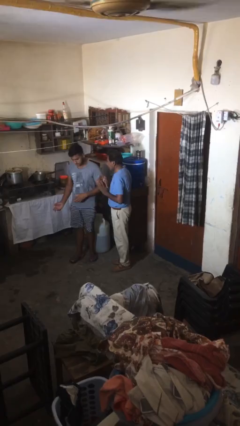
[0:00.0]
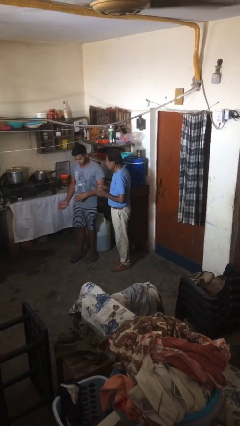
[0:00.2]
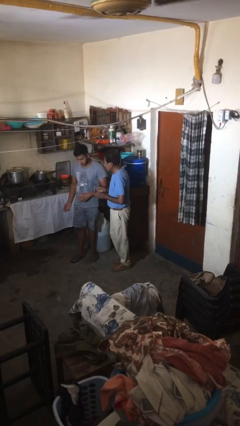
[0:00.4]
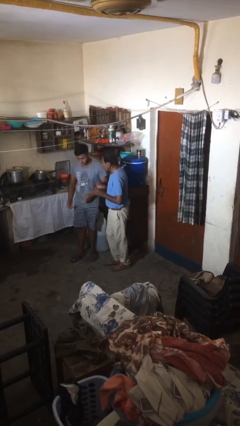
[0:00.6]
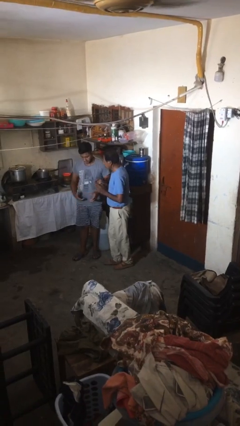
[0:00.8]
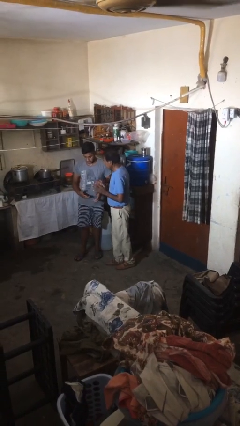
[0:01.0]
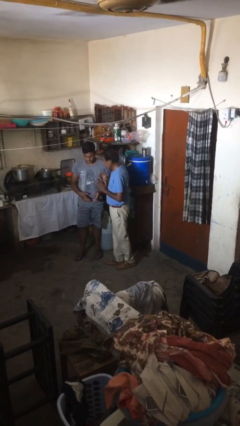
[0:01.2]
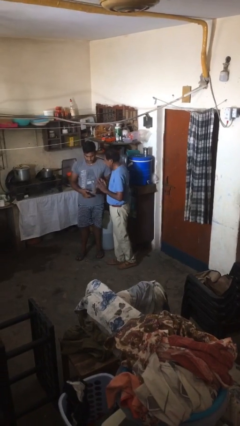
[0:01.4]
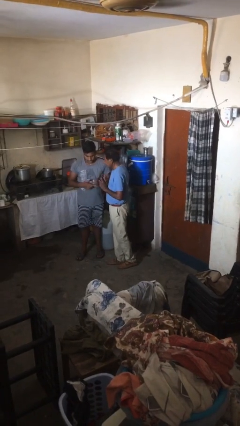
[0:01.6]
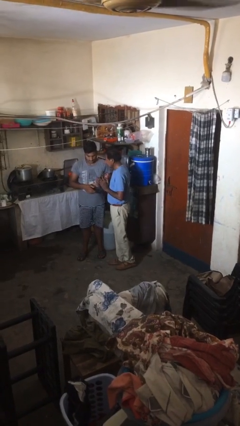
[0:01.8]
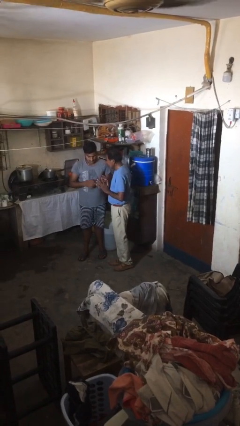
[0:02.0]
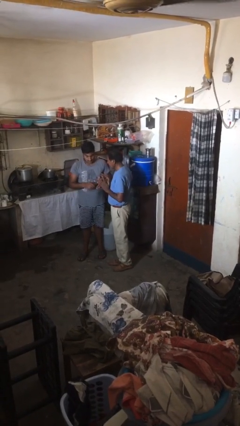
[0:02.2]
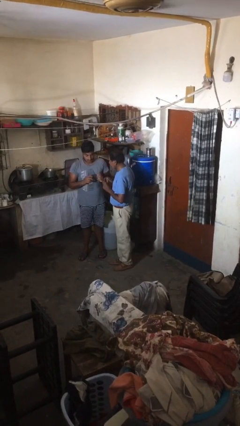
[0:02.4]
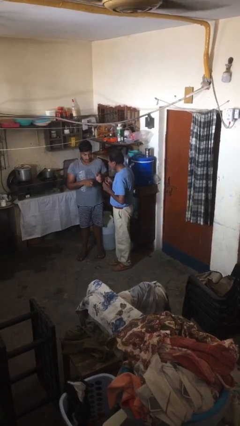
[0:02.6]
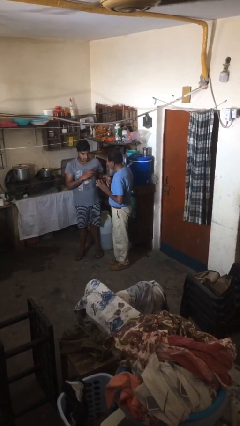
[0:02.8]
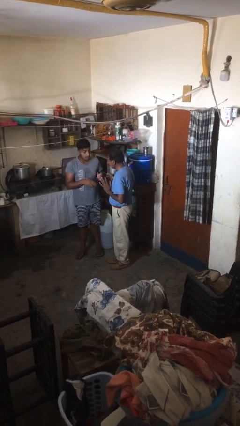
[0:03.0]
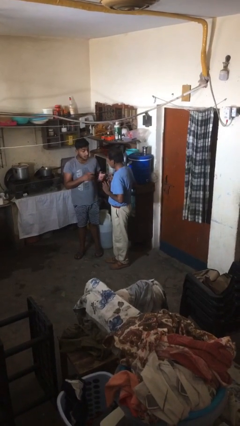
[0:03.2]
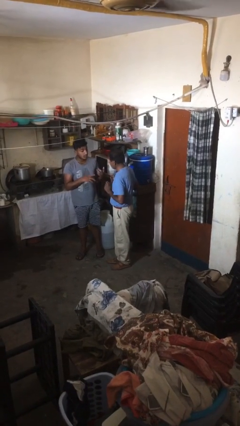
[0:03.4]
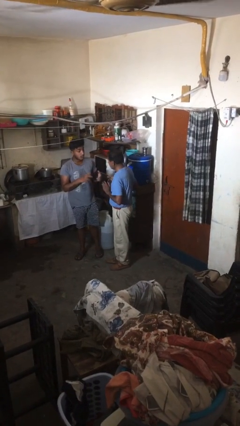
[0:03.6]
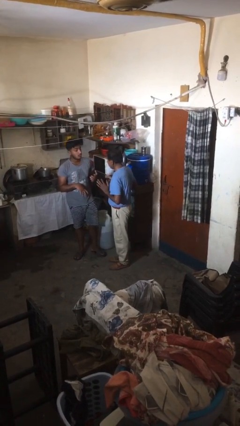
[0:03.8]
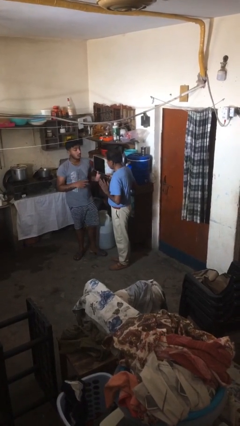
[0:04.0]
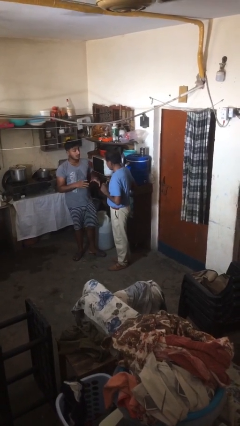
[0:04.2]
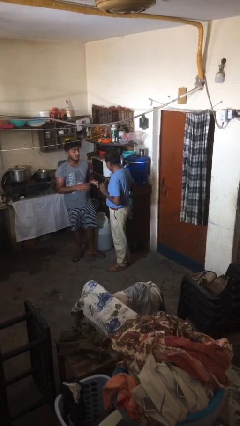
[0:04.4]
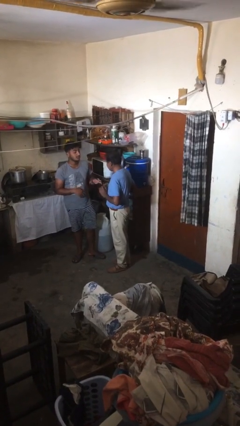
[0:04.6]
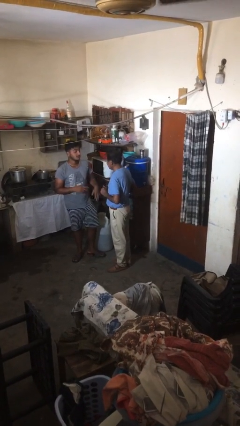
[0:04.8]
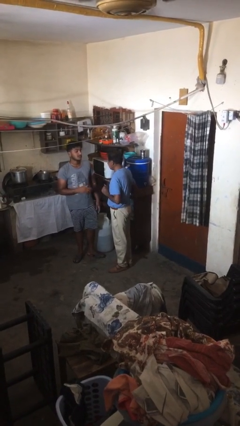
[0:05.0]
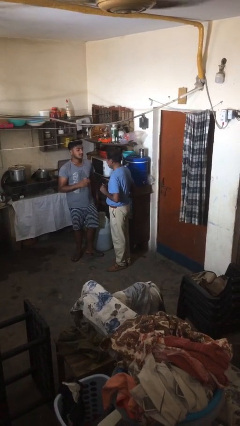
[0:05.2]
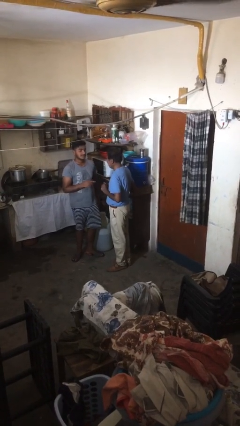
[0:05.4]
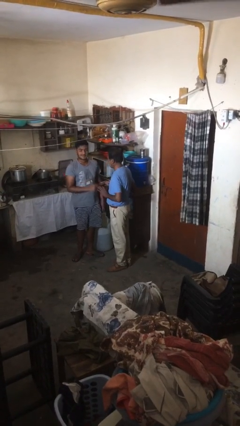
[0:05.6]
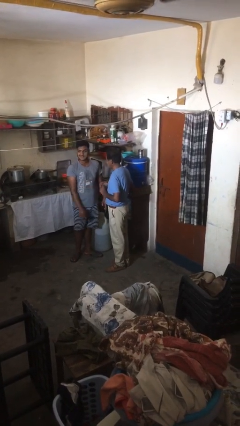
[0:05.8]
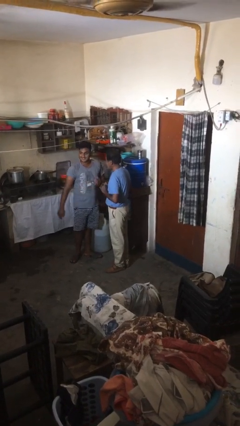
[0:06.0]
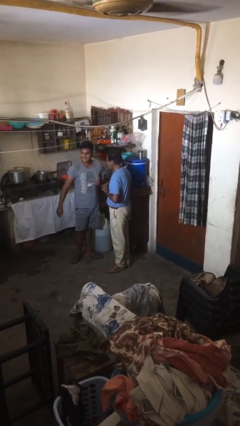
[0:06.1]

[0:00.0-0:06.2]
person talks to person

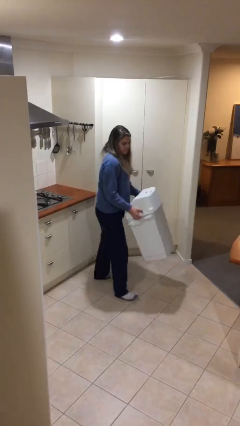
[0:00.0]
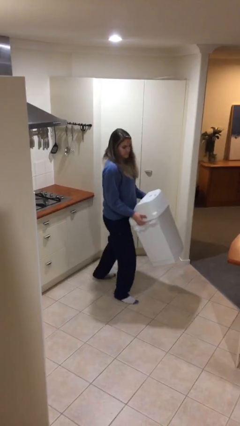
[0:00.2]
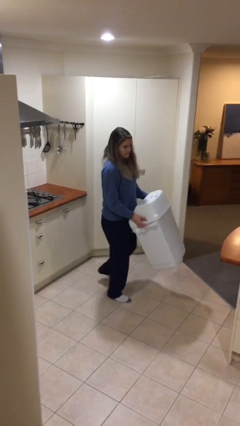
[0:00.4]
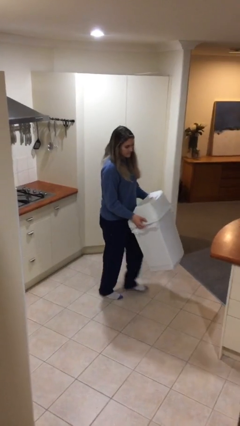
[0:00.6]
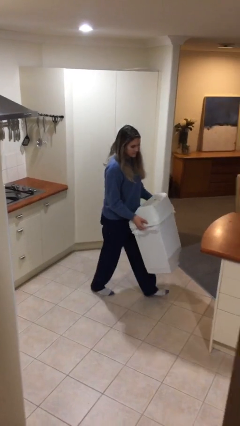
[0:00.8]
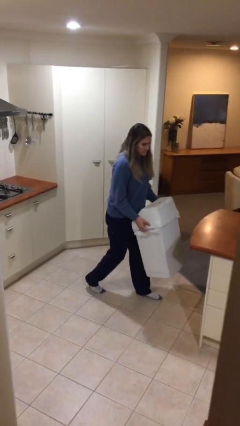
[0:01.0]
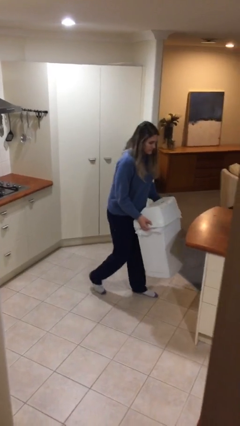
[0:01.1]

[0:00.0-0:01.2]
person carries heavy object

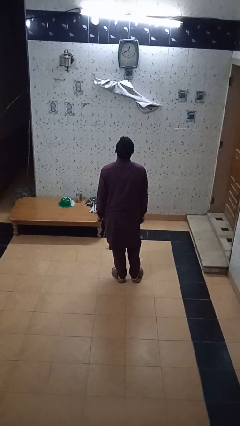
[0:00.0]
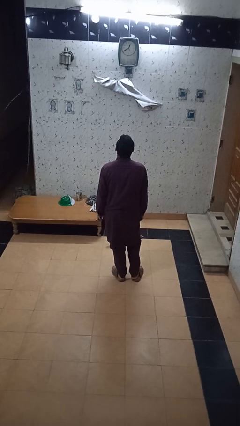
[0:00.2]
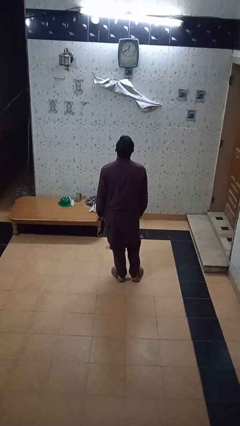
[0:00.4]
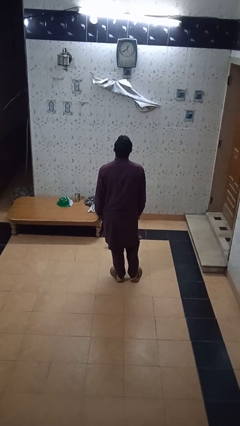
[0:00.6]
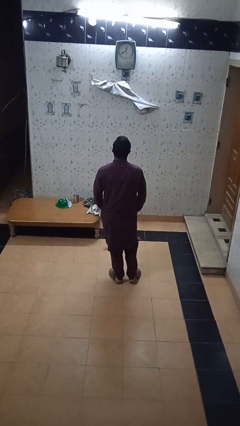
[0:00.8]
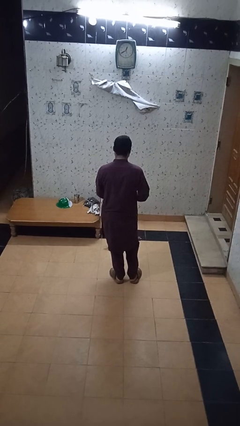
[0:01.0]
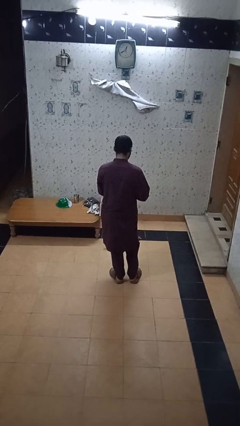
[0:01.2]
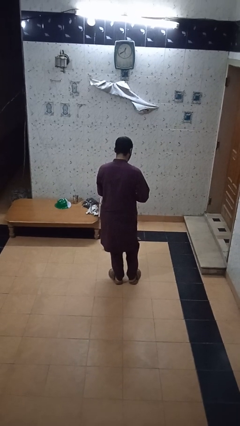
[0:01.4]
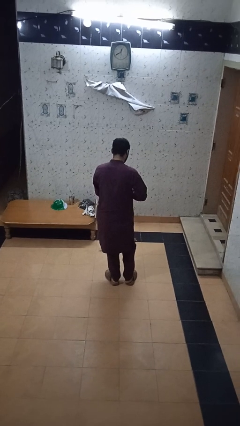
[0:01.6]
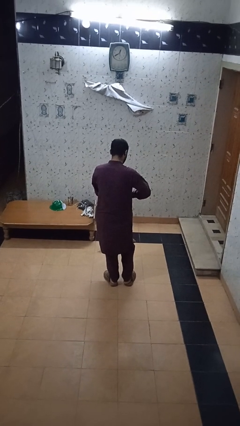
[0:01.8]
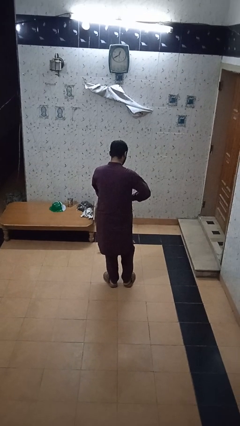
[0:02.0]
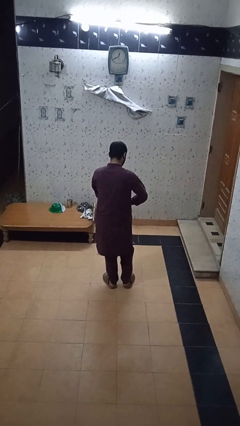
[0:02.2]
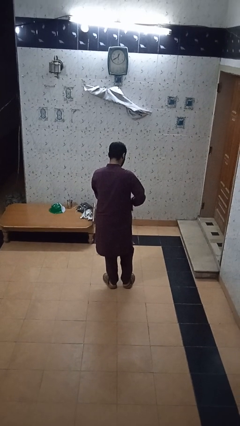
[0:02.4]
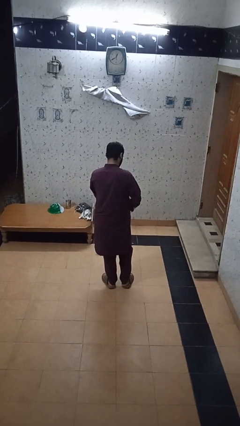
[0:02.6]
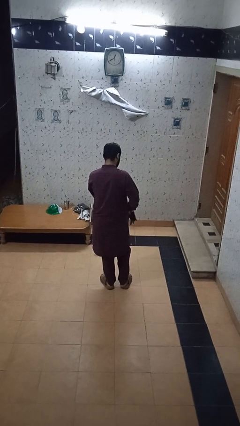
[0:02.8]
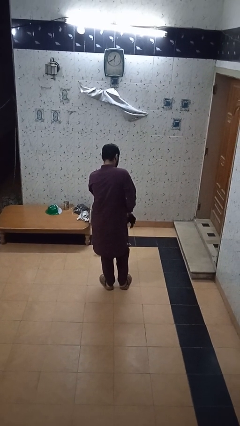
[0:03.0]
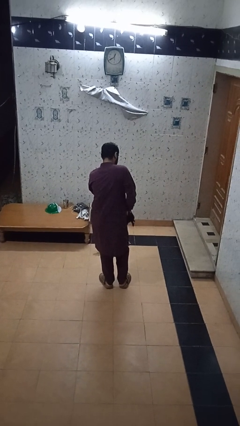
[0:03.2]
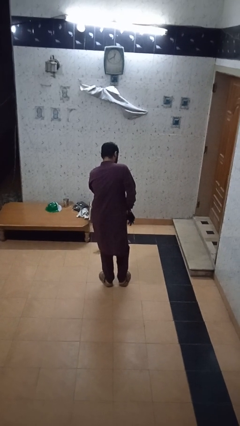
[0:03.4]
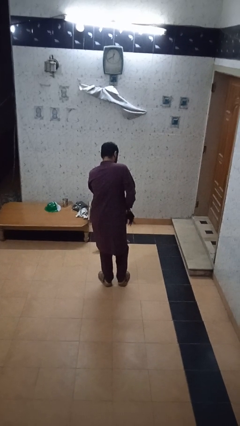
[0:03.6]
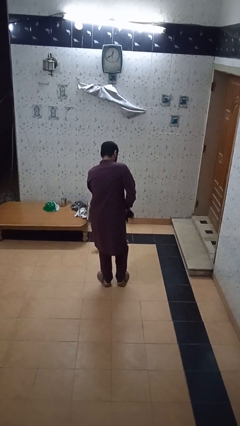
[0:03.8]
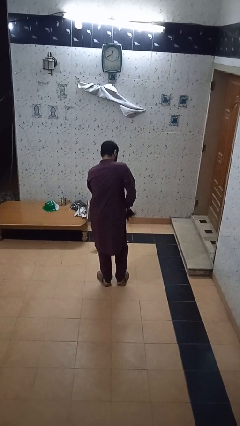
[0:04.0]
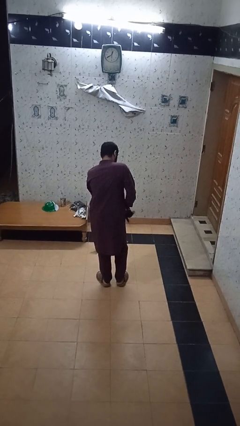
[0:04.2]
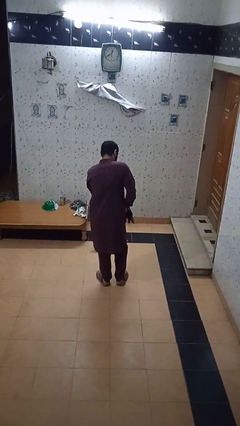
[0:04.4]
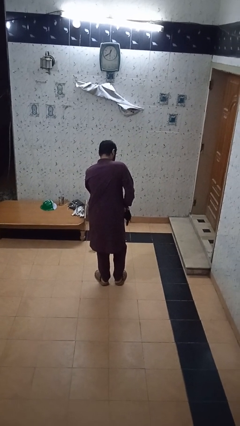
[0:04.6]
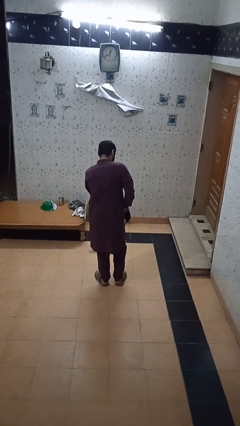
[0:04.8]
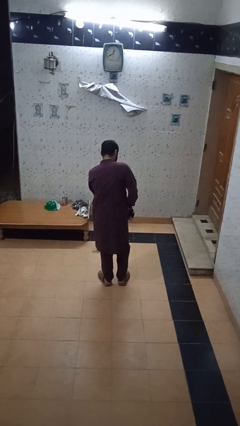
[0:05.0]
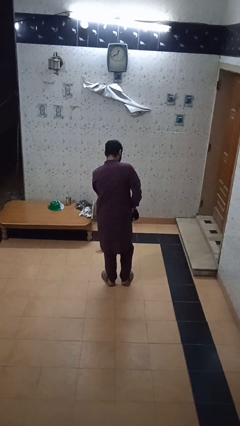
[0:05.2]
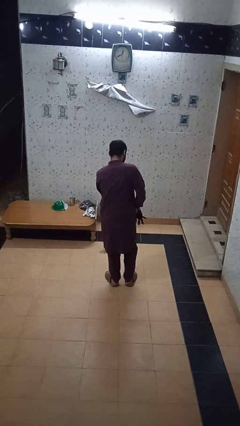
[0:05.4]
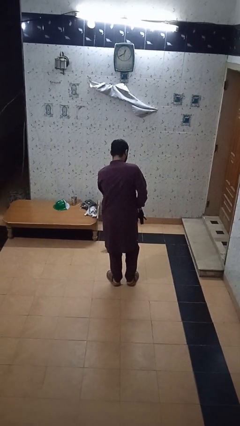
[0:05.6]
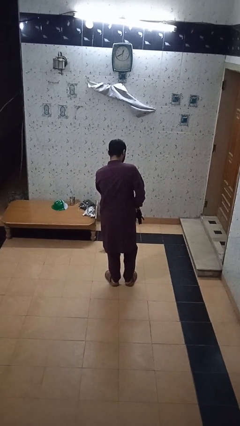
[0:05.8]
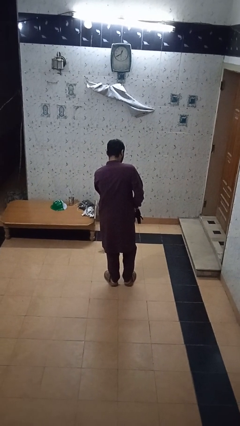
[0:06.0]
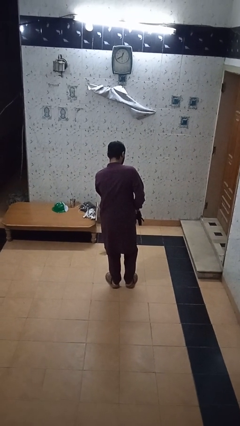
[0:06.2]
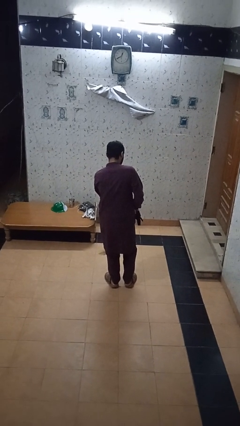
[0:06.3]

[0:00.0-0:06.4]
person puts on gloves

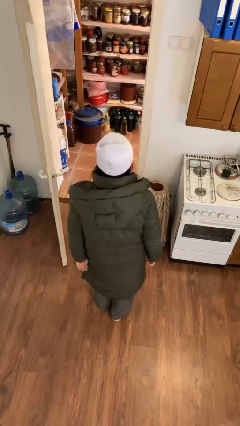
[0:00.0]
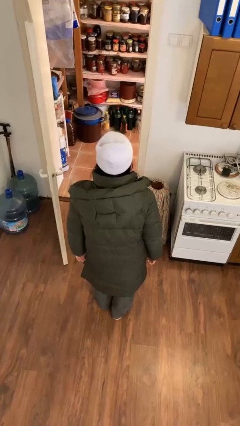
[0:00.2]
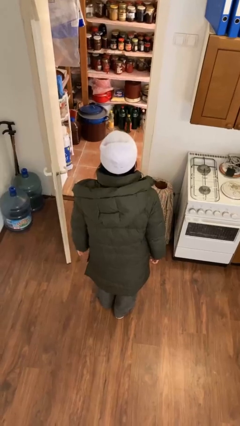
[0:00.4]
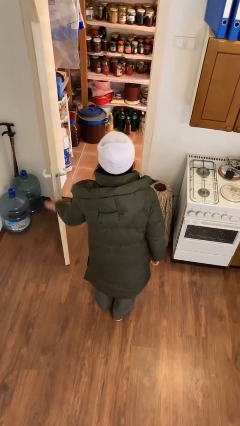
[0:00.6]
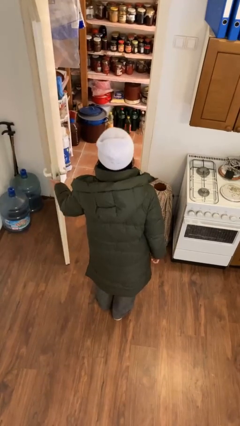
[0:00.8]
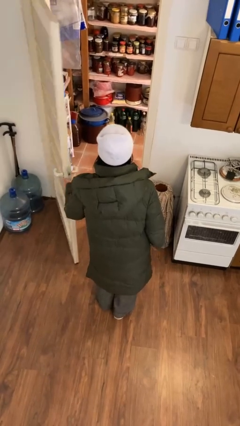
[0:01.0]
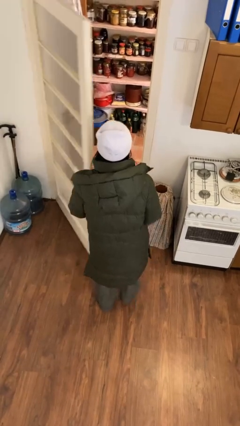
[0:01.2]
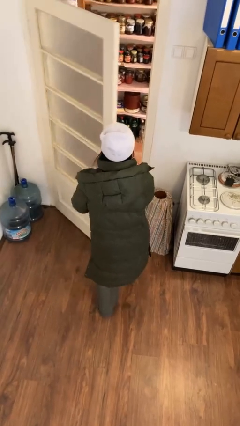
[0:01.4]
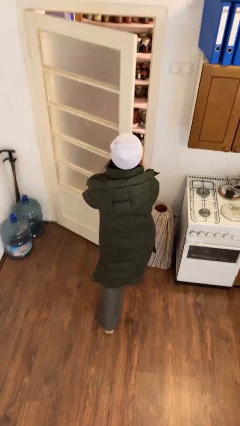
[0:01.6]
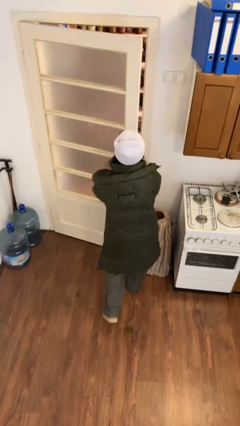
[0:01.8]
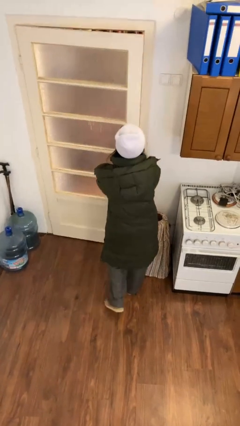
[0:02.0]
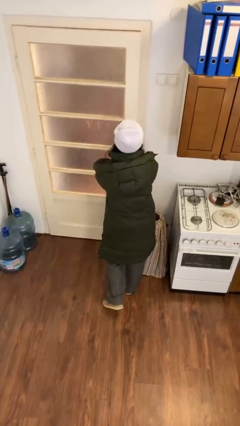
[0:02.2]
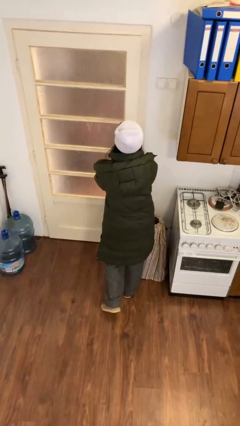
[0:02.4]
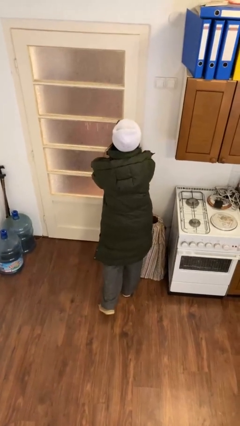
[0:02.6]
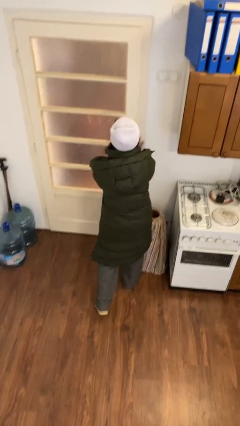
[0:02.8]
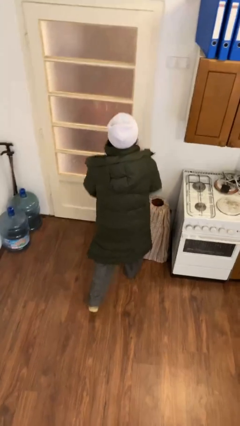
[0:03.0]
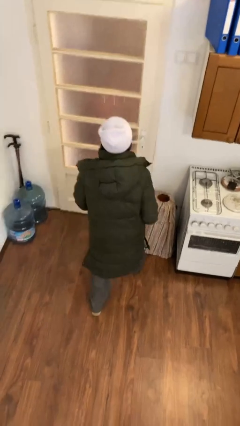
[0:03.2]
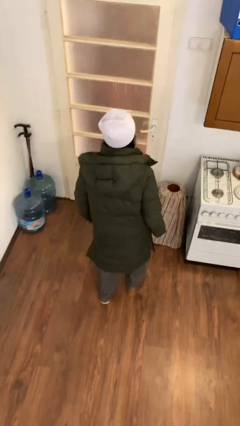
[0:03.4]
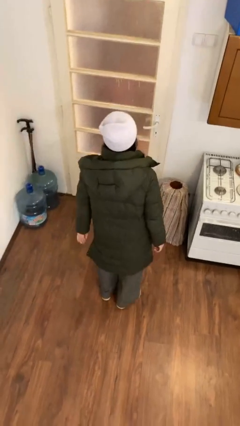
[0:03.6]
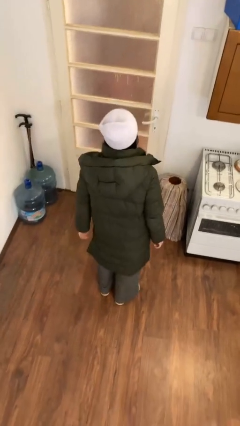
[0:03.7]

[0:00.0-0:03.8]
person closes facility door
